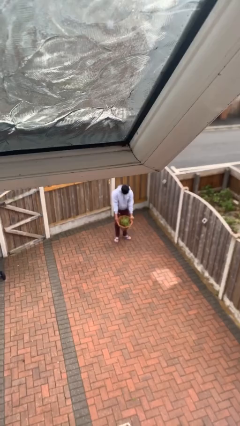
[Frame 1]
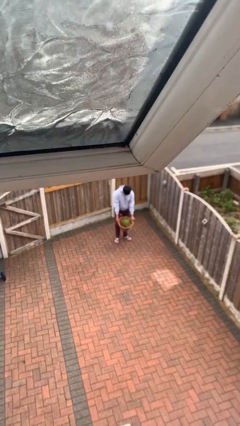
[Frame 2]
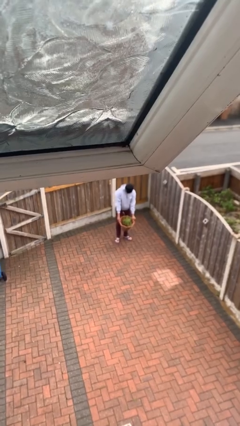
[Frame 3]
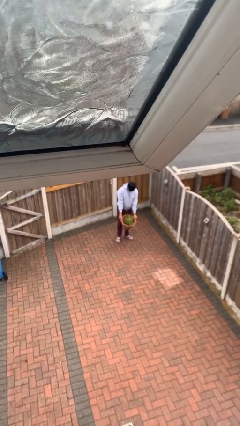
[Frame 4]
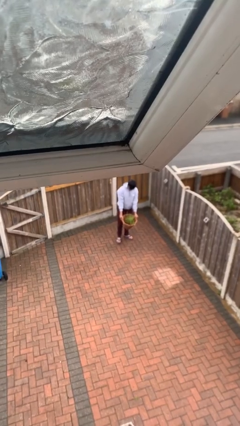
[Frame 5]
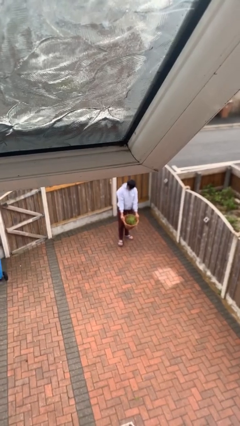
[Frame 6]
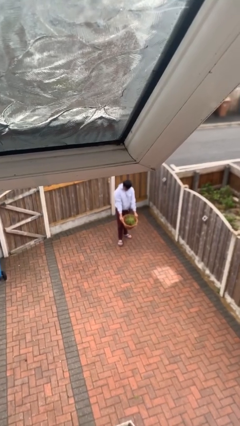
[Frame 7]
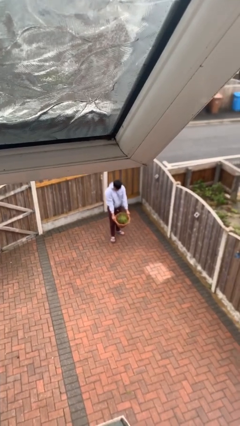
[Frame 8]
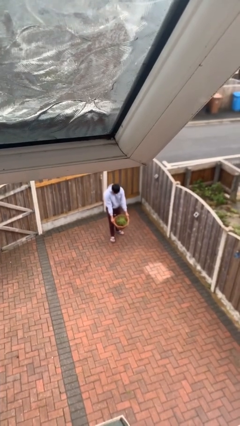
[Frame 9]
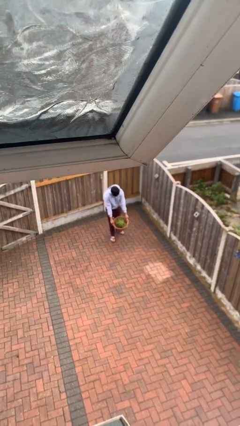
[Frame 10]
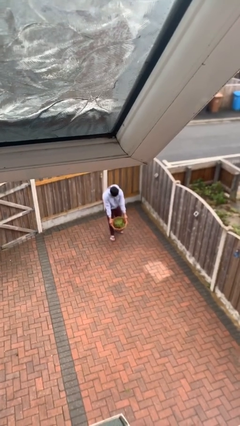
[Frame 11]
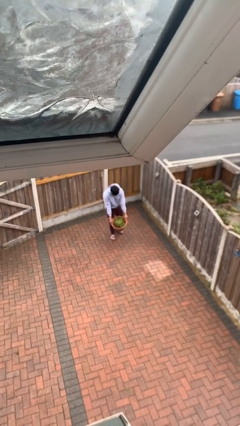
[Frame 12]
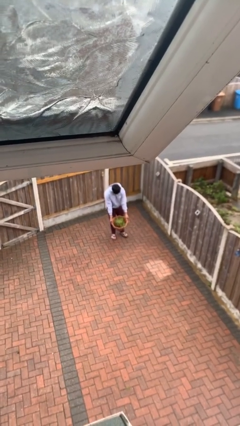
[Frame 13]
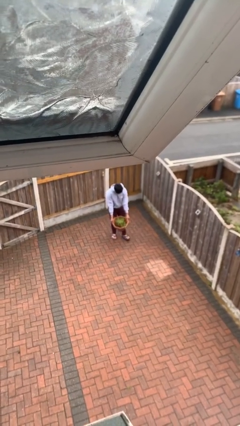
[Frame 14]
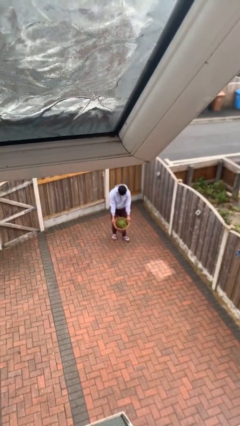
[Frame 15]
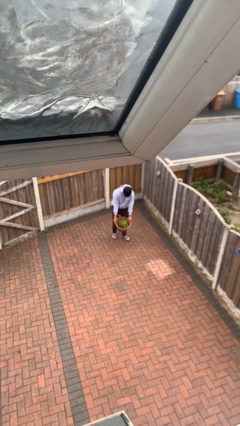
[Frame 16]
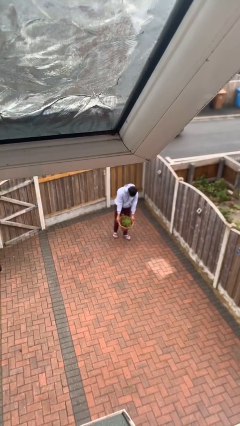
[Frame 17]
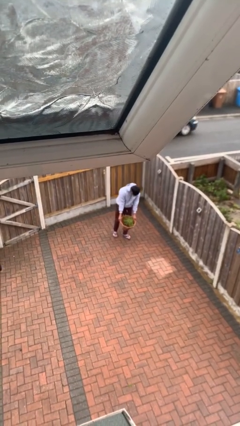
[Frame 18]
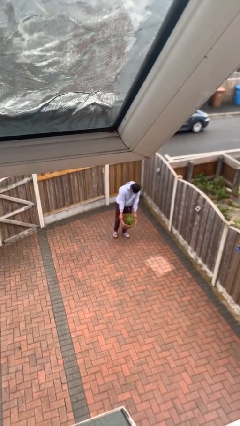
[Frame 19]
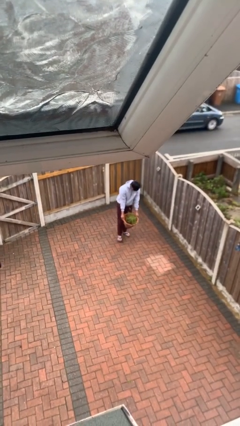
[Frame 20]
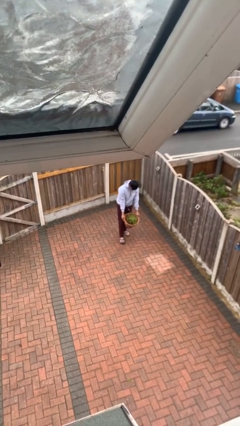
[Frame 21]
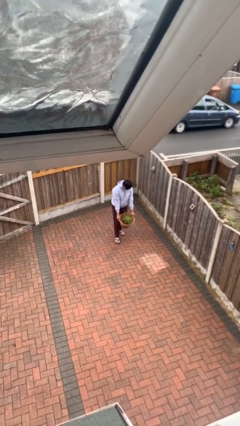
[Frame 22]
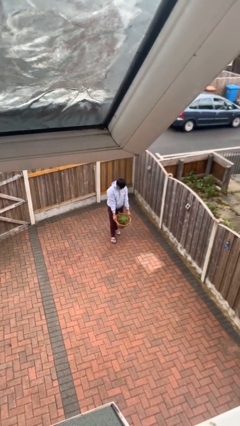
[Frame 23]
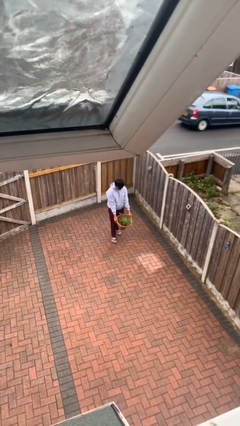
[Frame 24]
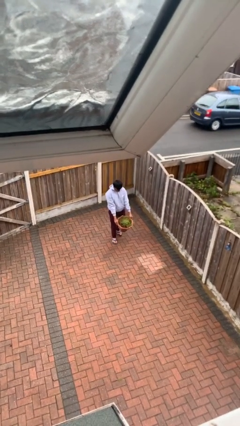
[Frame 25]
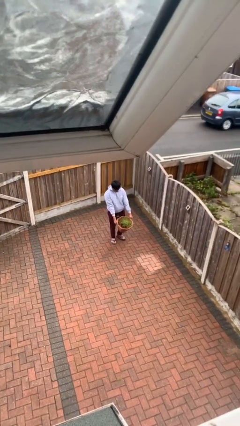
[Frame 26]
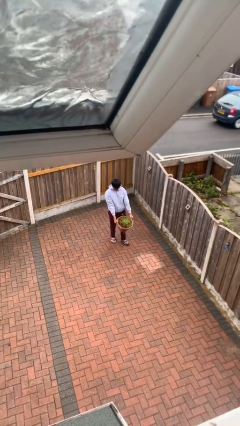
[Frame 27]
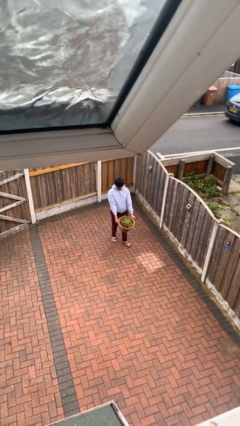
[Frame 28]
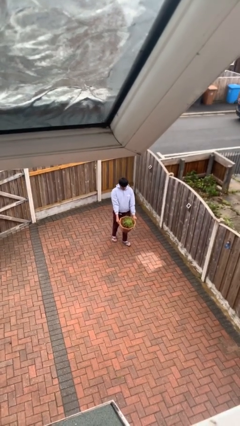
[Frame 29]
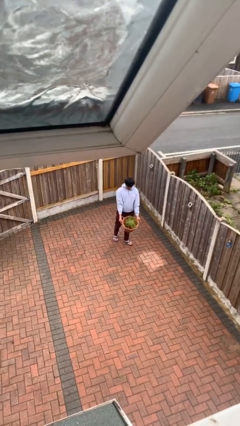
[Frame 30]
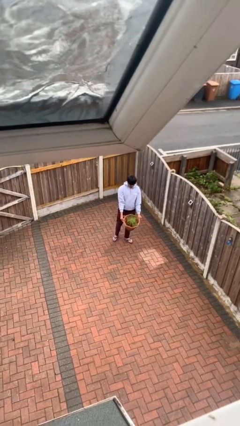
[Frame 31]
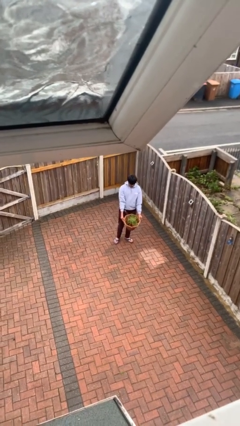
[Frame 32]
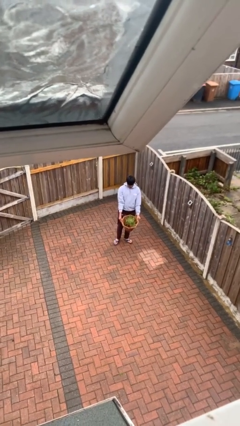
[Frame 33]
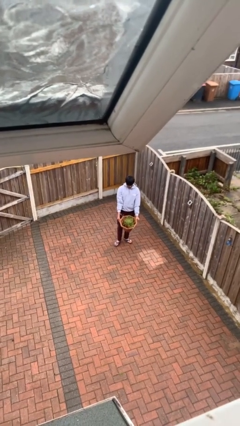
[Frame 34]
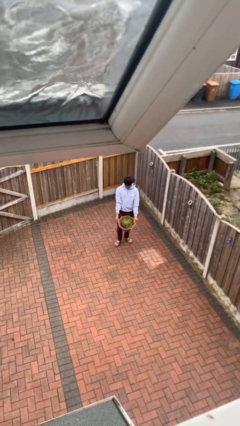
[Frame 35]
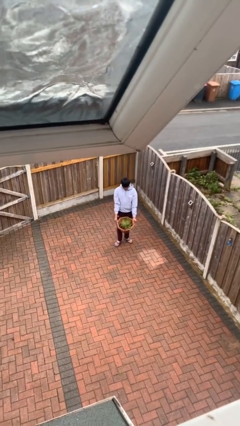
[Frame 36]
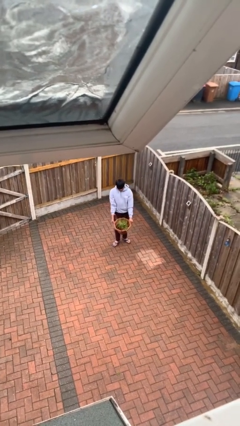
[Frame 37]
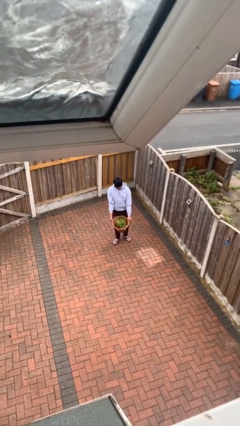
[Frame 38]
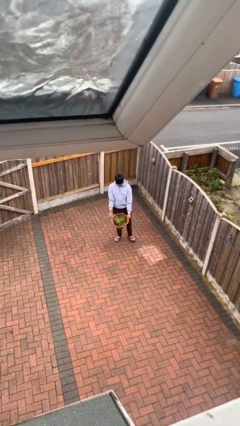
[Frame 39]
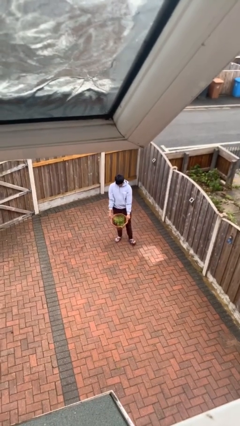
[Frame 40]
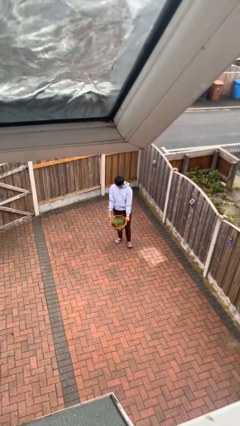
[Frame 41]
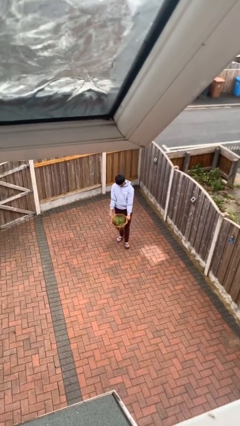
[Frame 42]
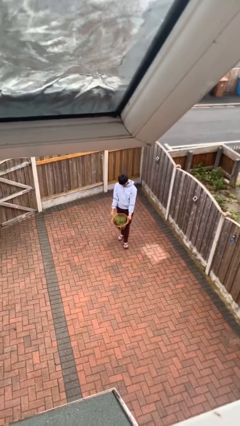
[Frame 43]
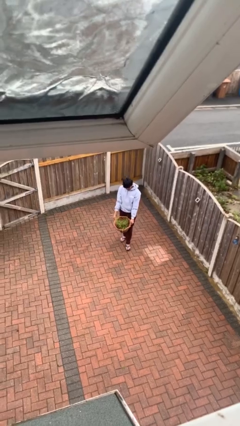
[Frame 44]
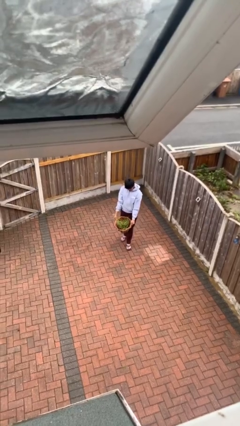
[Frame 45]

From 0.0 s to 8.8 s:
person carries heavy object

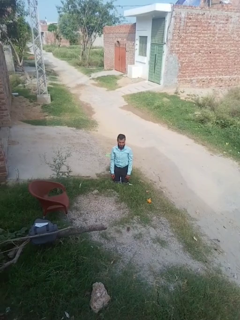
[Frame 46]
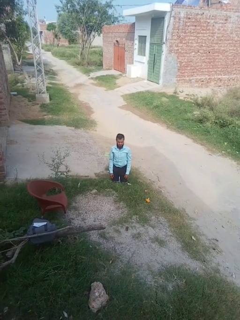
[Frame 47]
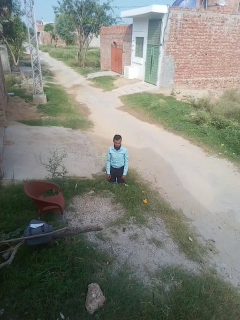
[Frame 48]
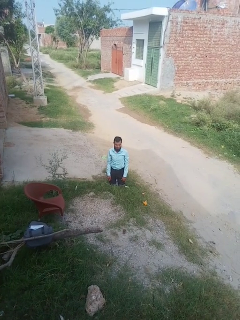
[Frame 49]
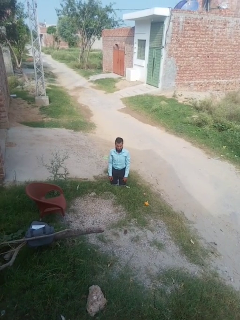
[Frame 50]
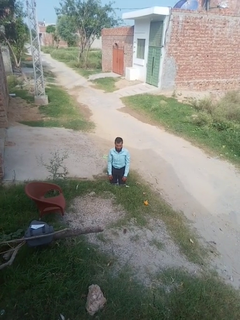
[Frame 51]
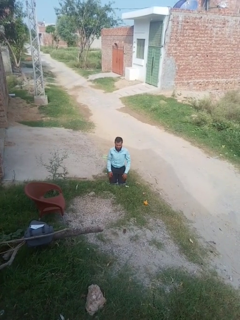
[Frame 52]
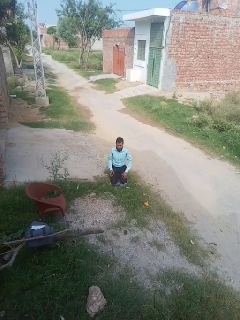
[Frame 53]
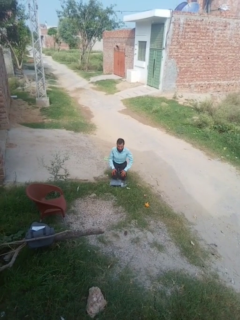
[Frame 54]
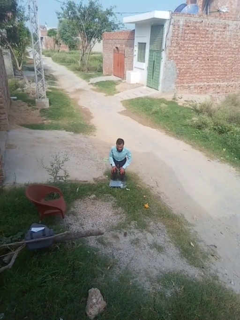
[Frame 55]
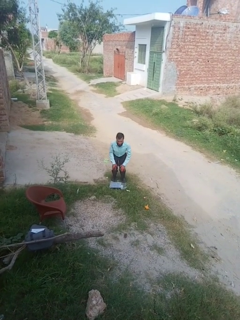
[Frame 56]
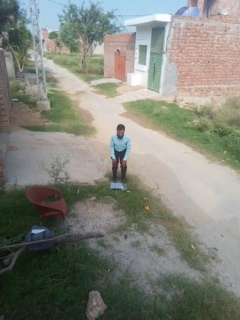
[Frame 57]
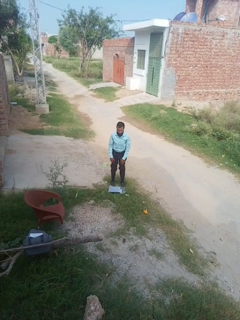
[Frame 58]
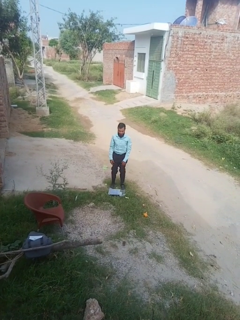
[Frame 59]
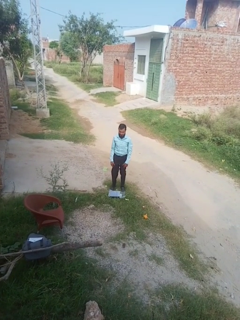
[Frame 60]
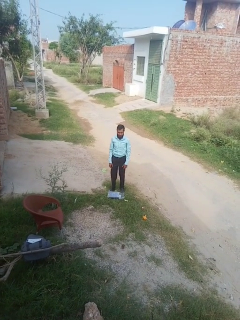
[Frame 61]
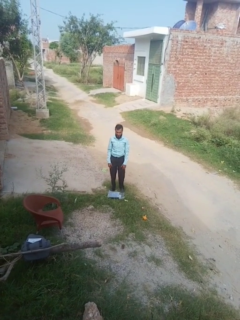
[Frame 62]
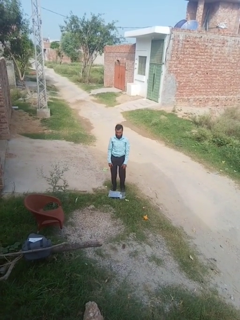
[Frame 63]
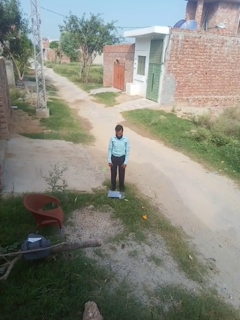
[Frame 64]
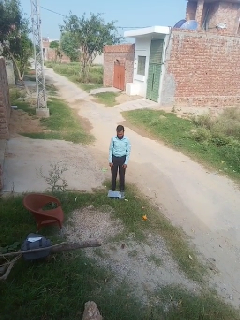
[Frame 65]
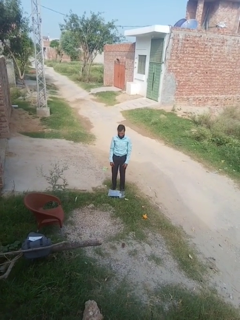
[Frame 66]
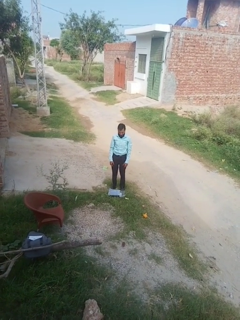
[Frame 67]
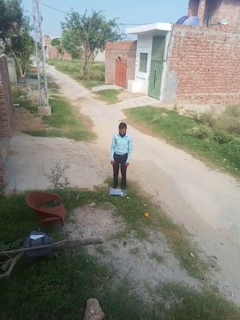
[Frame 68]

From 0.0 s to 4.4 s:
person stands up from floor

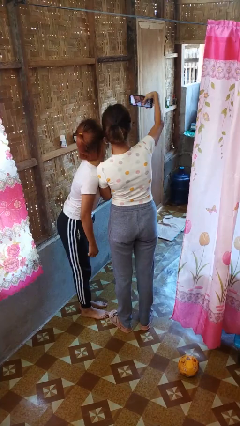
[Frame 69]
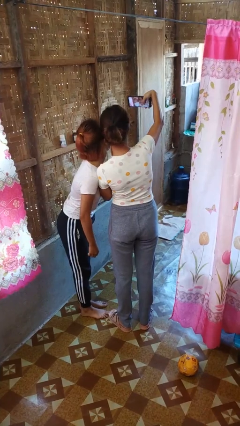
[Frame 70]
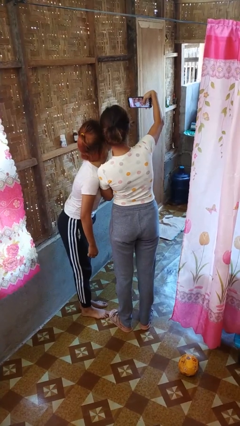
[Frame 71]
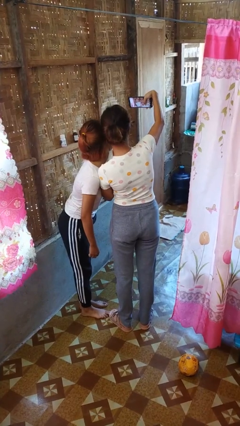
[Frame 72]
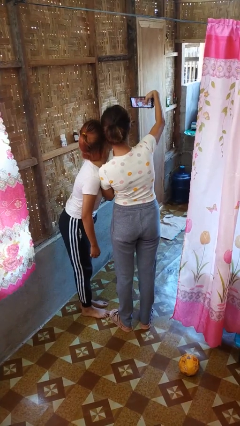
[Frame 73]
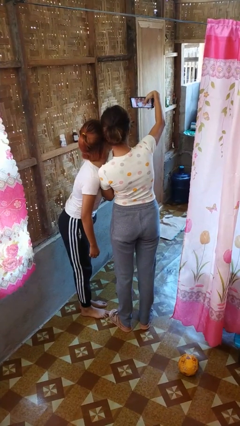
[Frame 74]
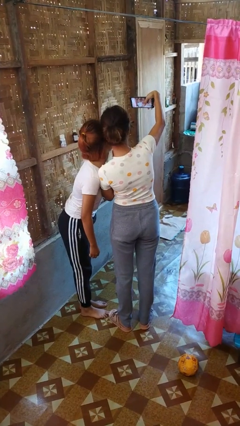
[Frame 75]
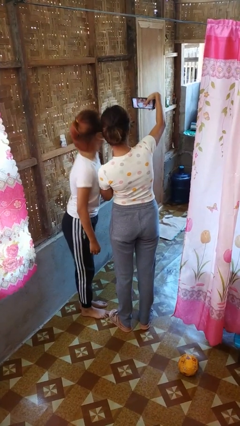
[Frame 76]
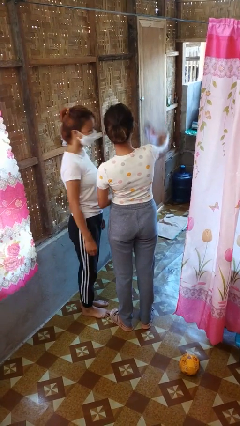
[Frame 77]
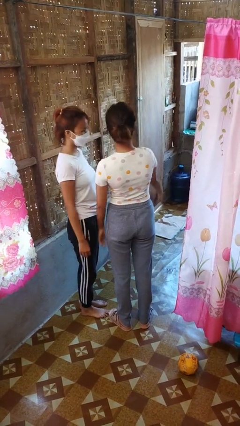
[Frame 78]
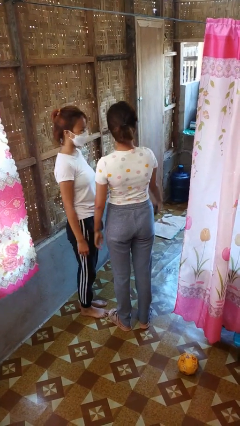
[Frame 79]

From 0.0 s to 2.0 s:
person takes selfie with person

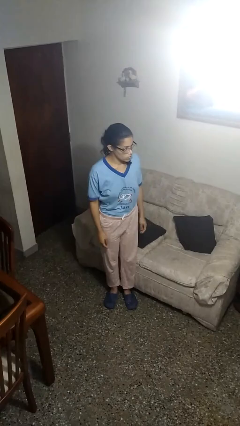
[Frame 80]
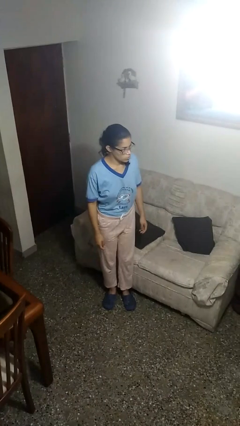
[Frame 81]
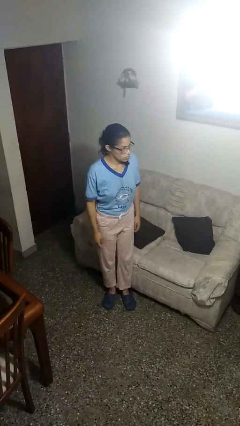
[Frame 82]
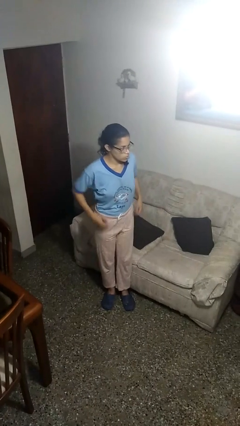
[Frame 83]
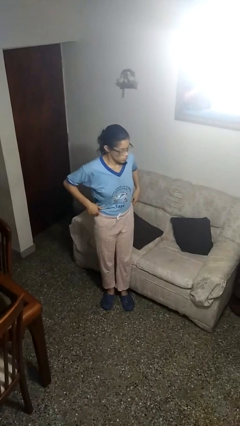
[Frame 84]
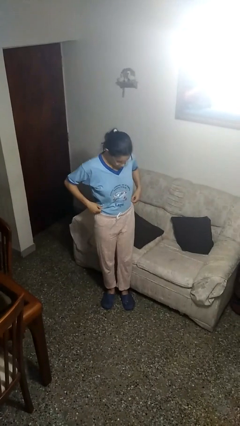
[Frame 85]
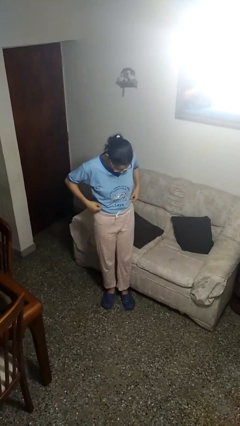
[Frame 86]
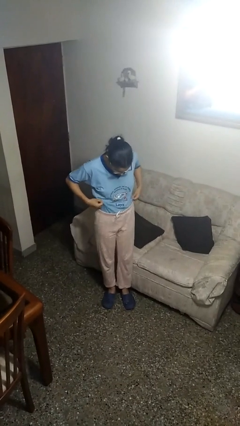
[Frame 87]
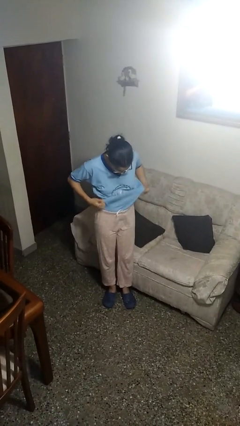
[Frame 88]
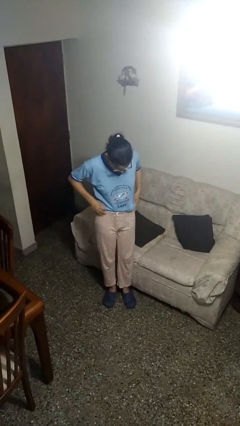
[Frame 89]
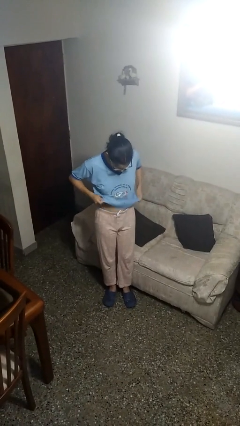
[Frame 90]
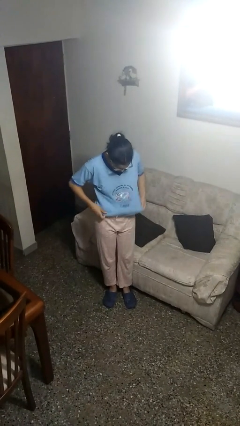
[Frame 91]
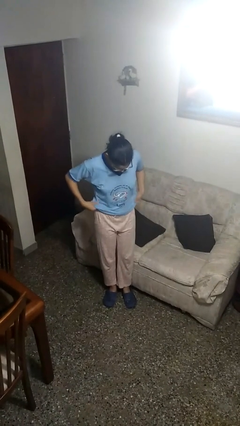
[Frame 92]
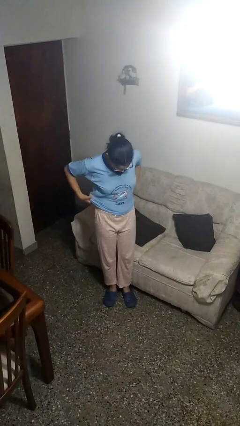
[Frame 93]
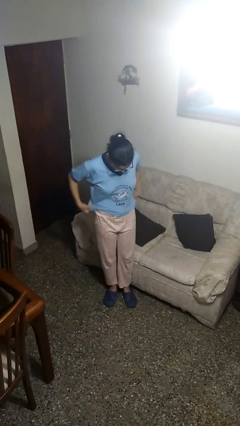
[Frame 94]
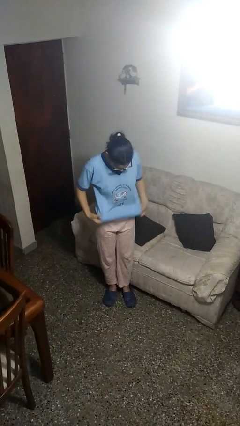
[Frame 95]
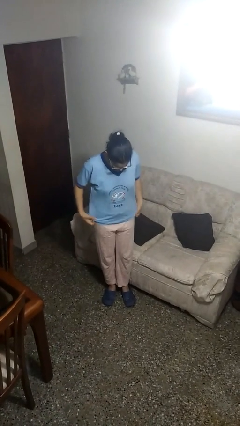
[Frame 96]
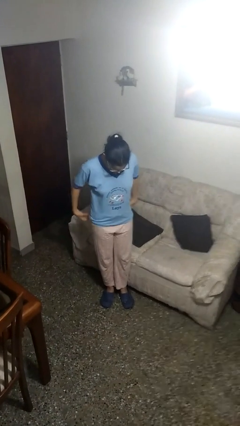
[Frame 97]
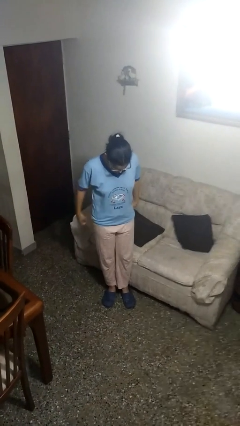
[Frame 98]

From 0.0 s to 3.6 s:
person untucks shirt
